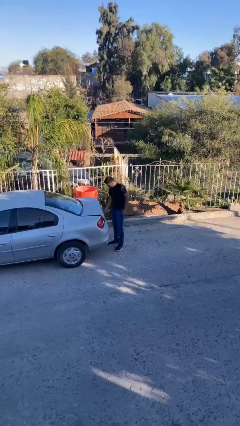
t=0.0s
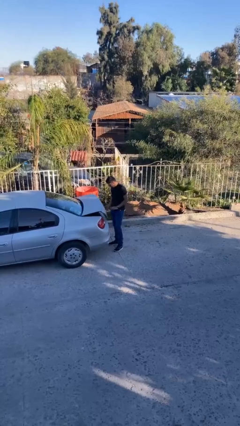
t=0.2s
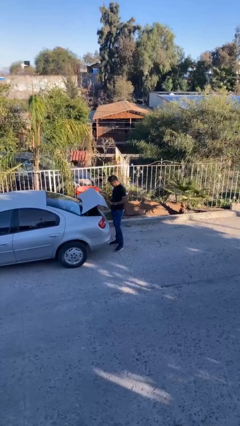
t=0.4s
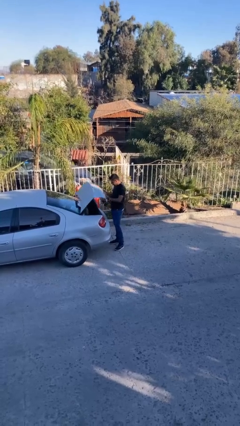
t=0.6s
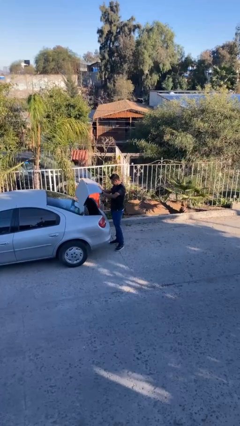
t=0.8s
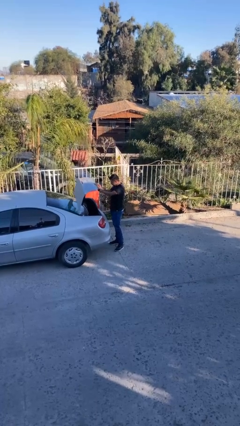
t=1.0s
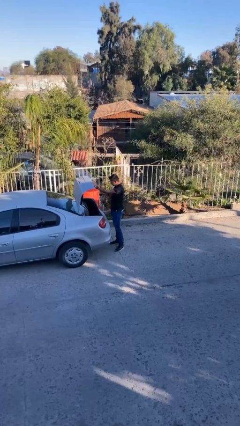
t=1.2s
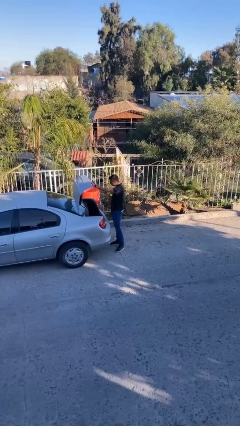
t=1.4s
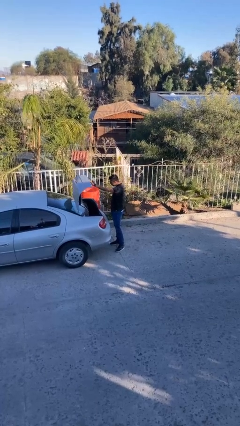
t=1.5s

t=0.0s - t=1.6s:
person opens car trunk

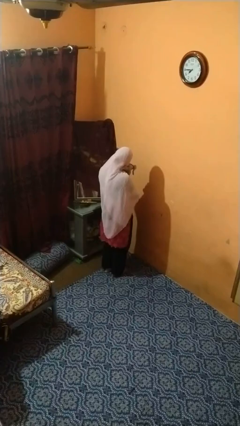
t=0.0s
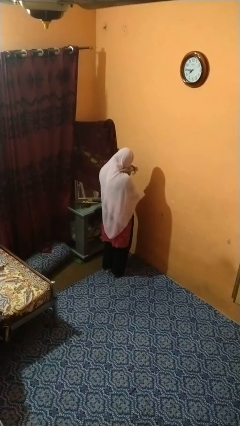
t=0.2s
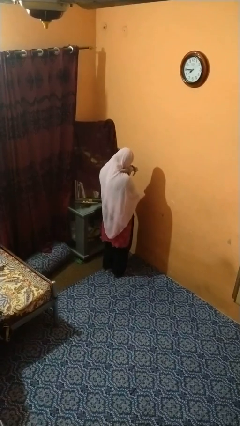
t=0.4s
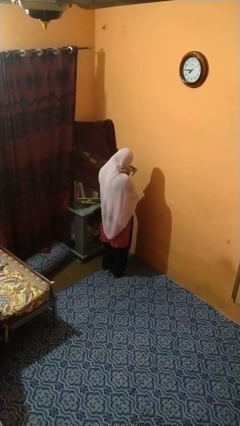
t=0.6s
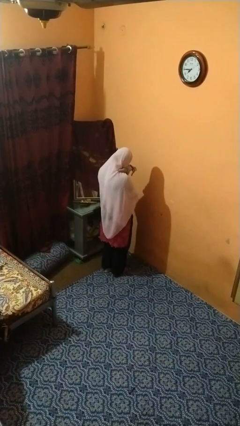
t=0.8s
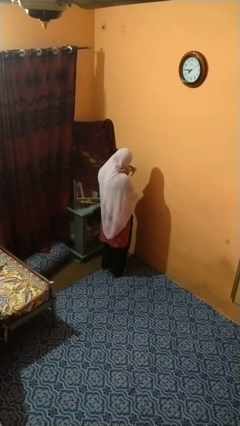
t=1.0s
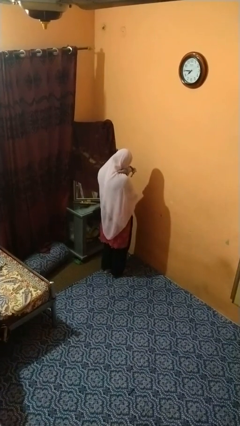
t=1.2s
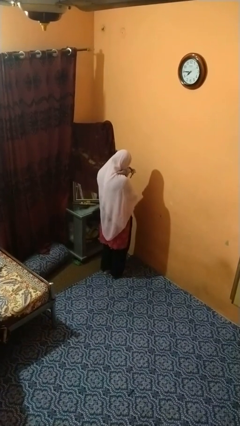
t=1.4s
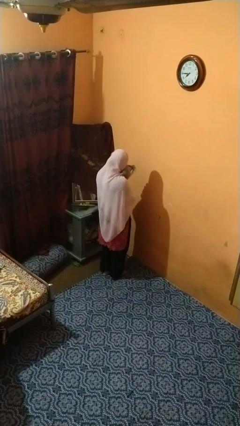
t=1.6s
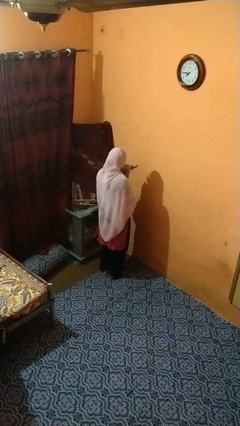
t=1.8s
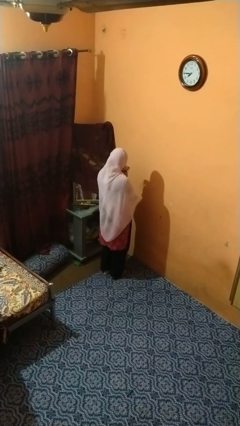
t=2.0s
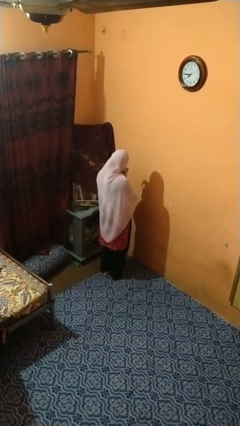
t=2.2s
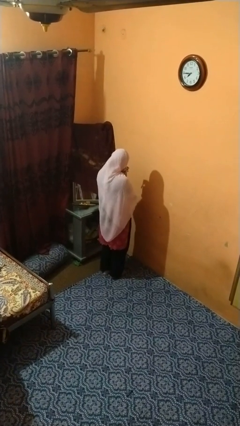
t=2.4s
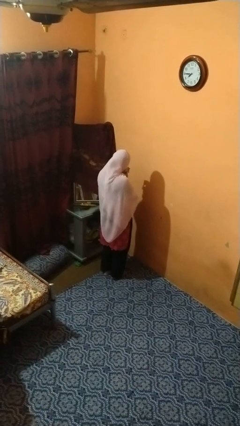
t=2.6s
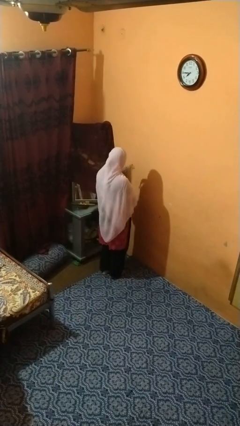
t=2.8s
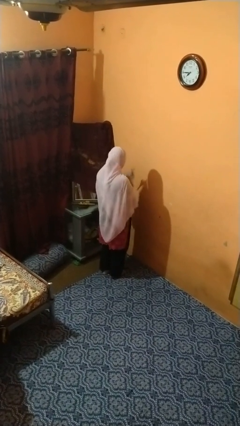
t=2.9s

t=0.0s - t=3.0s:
person hugs stuffed animal

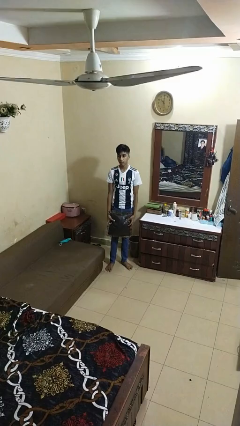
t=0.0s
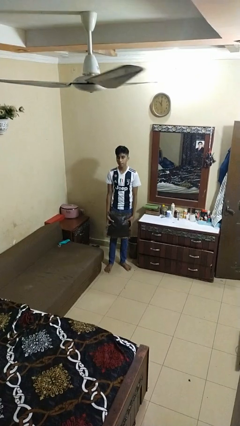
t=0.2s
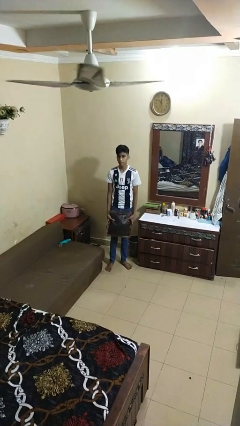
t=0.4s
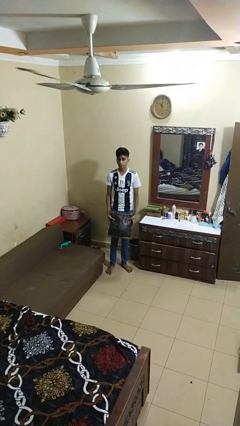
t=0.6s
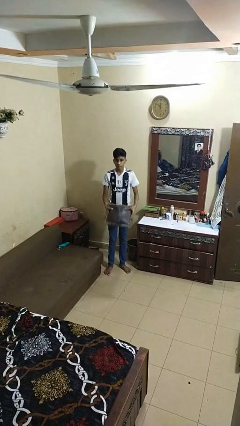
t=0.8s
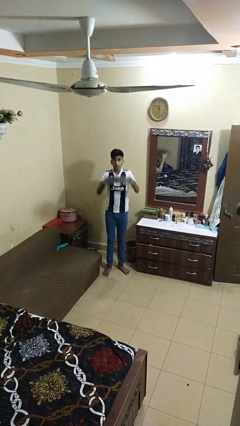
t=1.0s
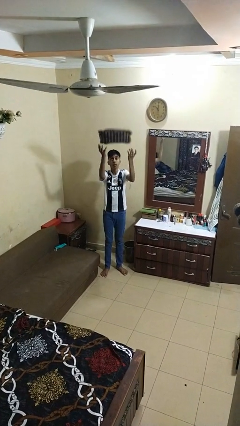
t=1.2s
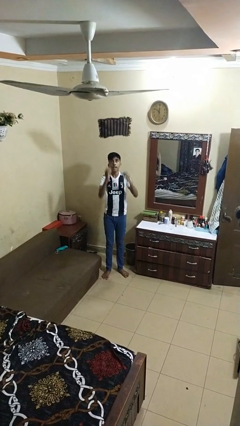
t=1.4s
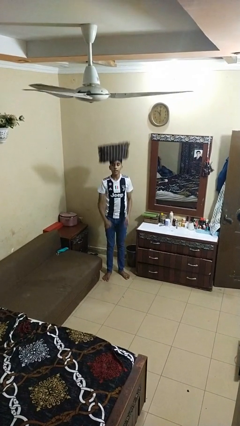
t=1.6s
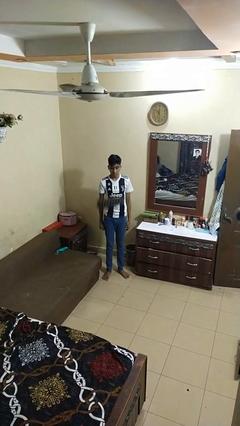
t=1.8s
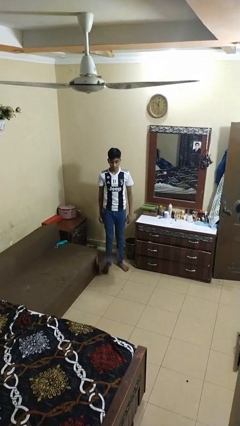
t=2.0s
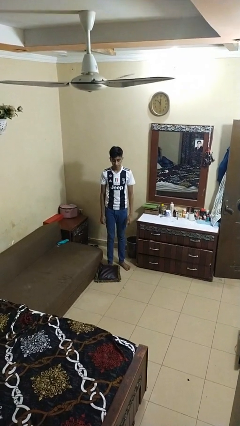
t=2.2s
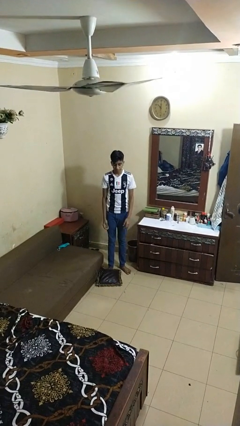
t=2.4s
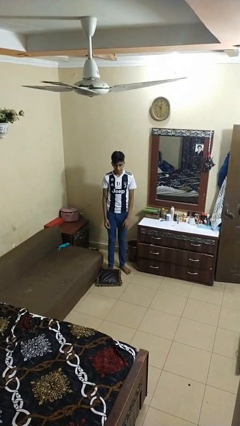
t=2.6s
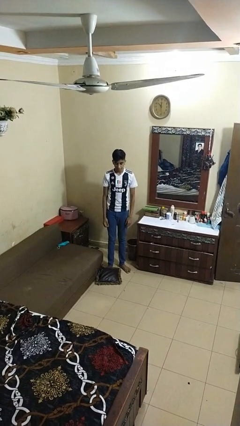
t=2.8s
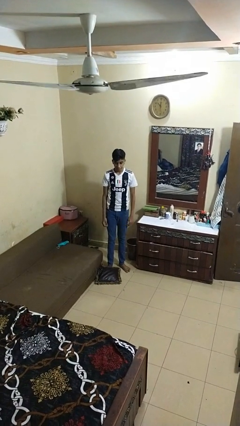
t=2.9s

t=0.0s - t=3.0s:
person throws object into air

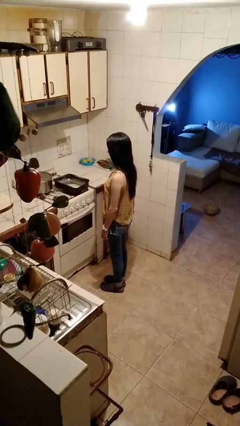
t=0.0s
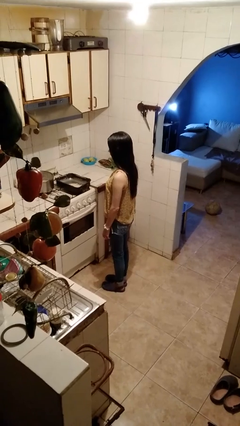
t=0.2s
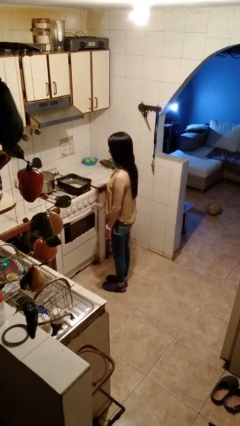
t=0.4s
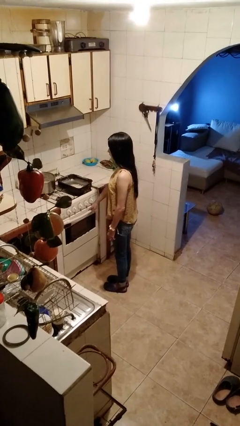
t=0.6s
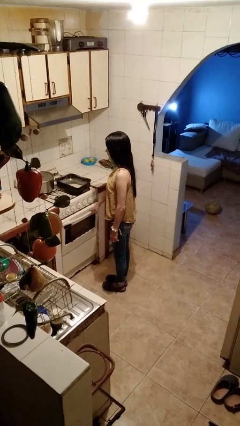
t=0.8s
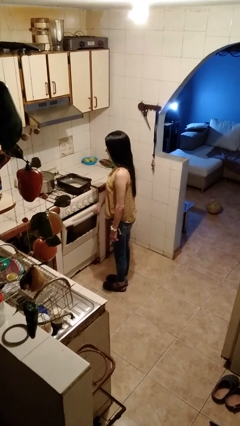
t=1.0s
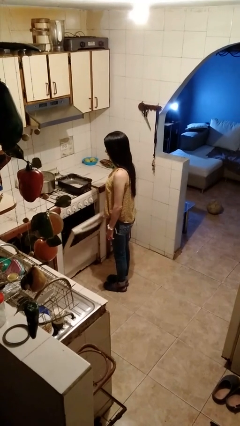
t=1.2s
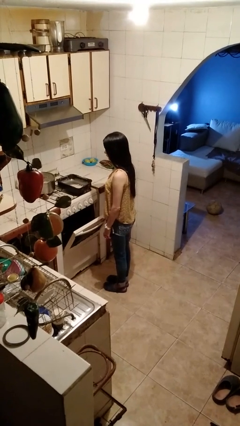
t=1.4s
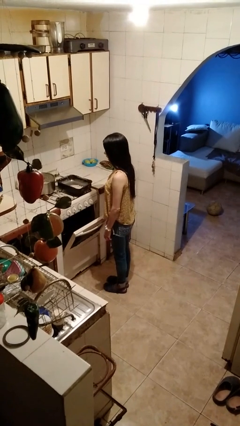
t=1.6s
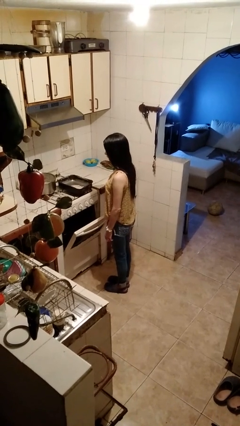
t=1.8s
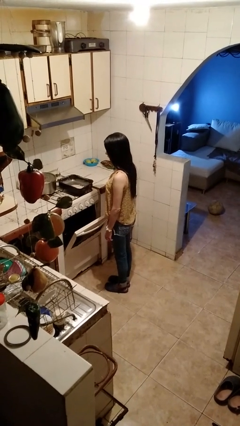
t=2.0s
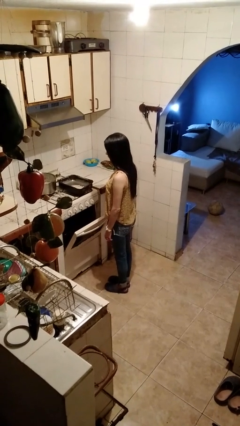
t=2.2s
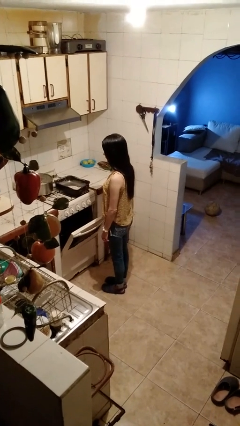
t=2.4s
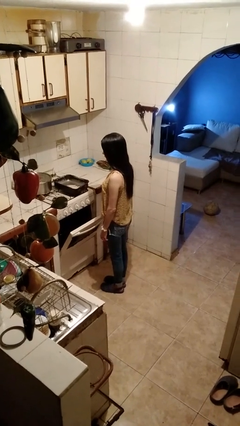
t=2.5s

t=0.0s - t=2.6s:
person opens oven door

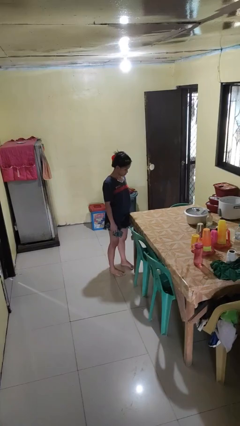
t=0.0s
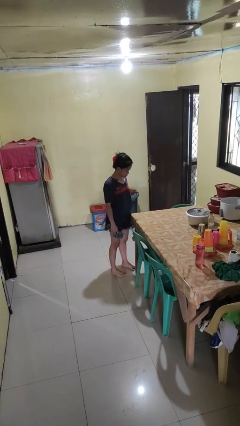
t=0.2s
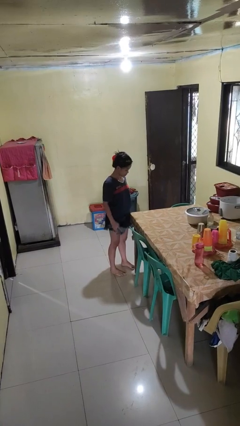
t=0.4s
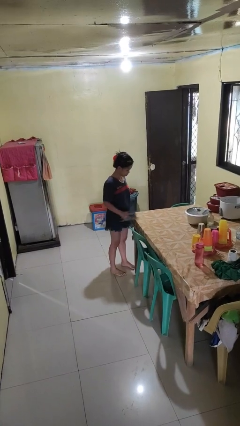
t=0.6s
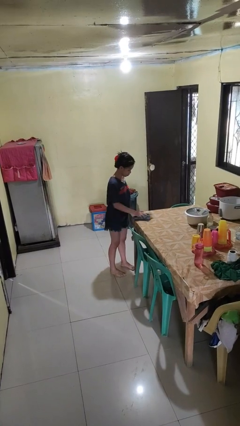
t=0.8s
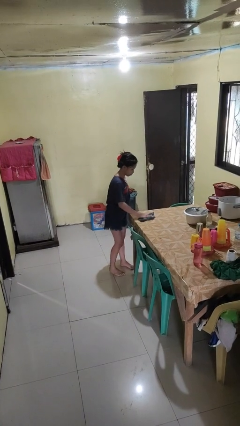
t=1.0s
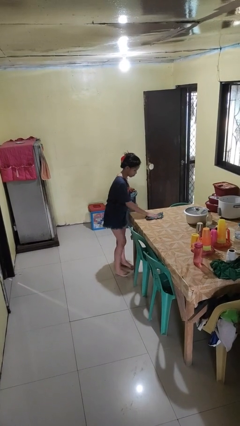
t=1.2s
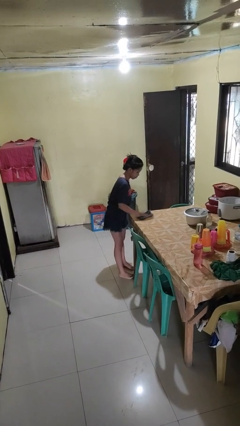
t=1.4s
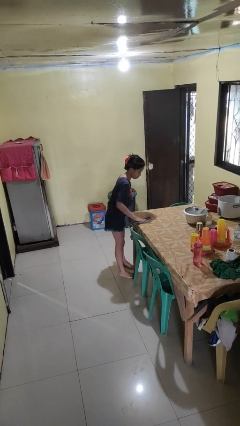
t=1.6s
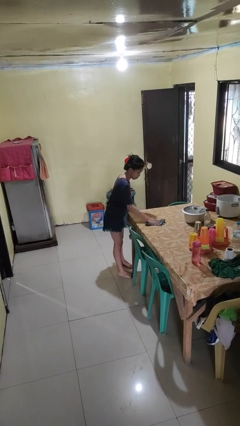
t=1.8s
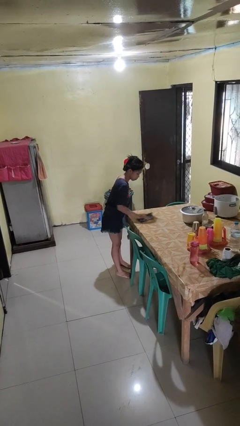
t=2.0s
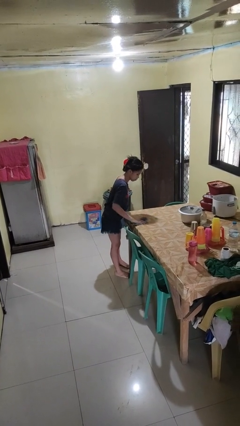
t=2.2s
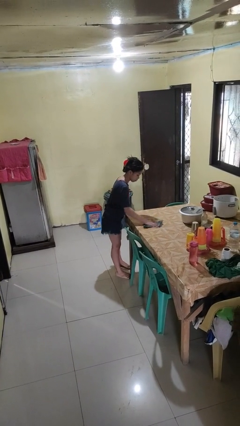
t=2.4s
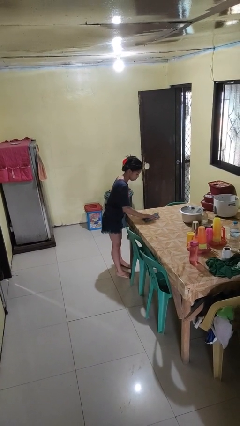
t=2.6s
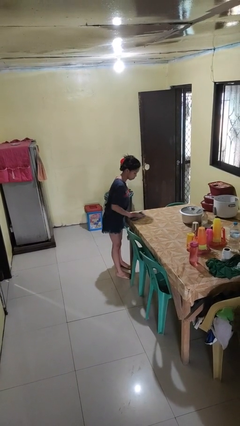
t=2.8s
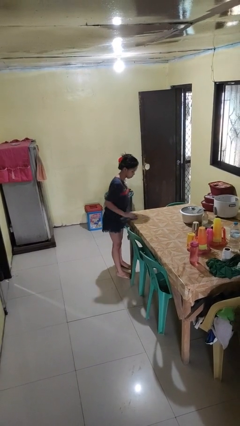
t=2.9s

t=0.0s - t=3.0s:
person cleans table with rag

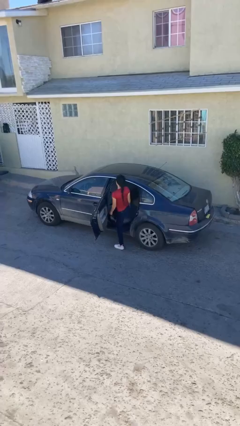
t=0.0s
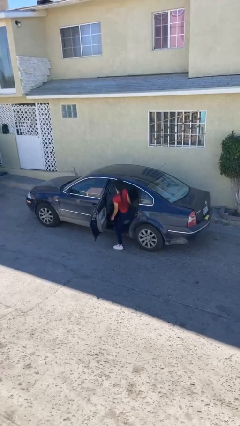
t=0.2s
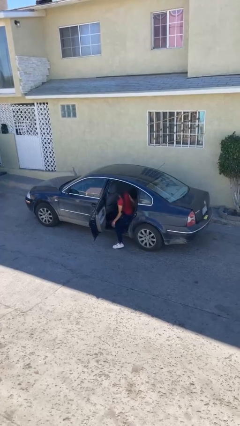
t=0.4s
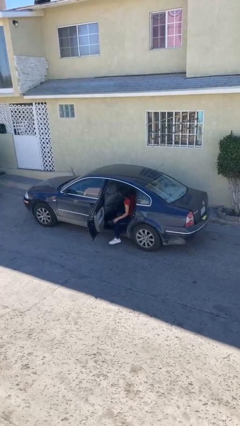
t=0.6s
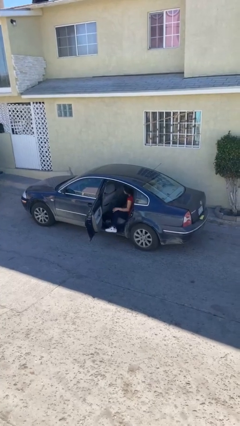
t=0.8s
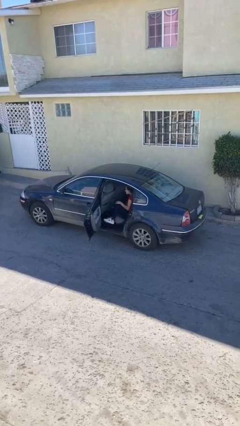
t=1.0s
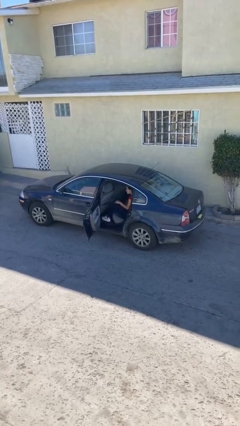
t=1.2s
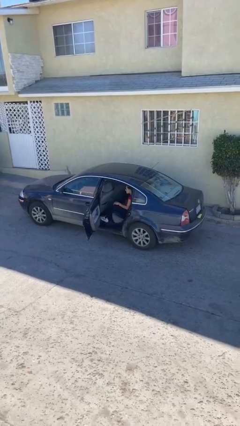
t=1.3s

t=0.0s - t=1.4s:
person enters car

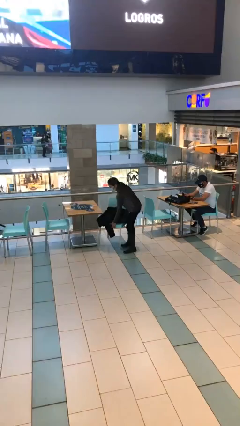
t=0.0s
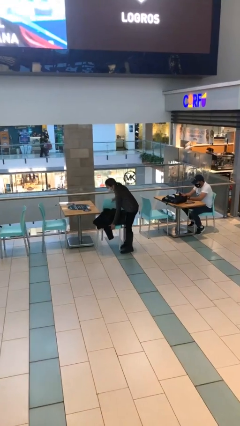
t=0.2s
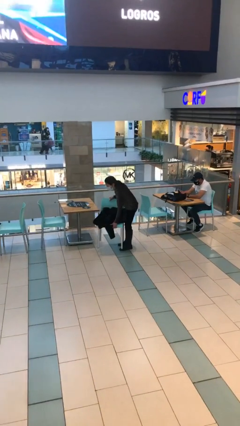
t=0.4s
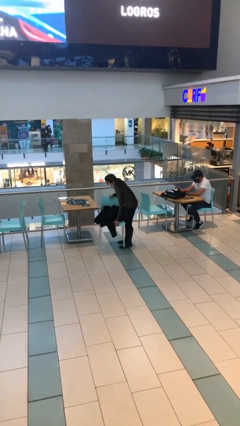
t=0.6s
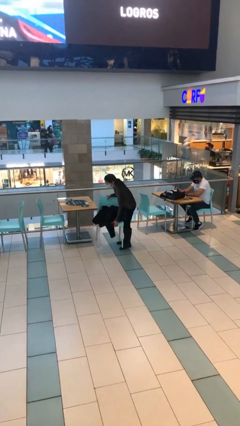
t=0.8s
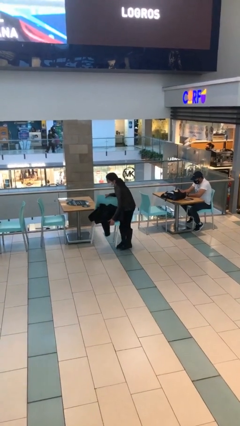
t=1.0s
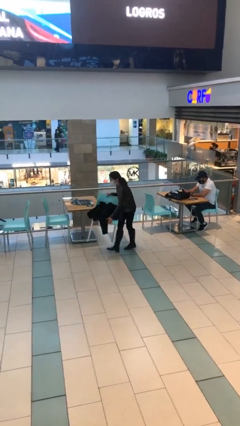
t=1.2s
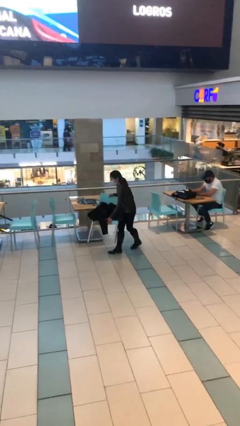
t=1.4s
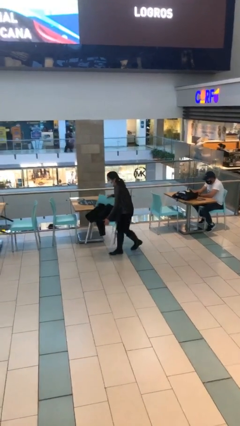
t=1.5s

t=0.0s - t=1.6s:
person picks up object from floor

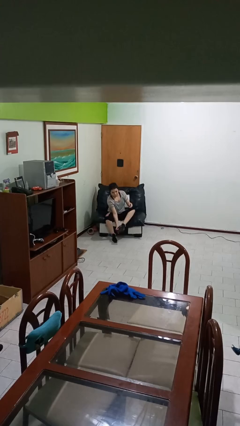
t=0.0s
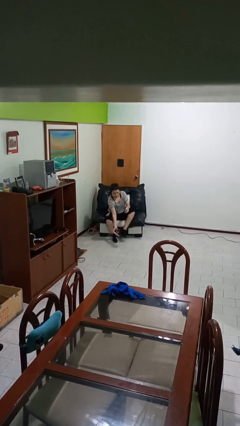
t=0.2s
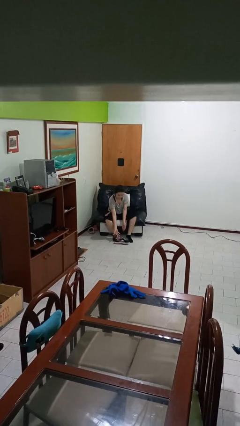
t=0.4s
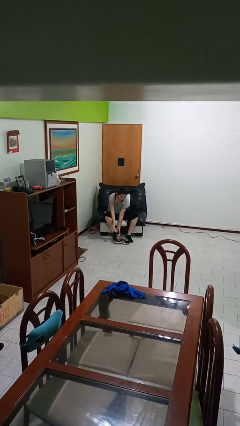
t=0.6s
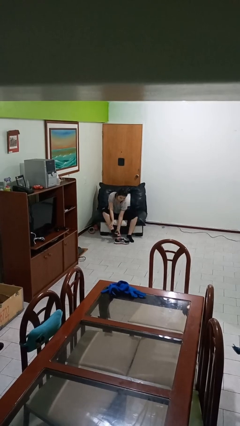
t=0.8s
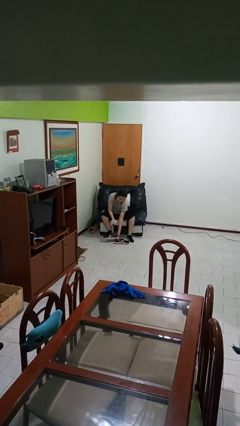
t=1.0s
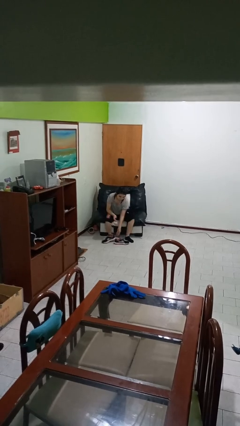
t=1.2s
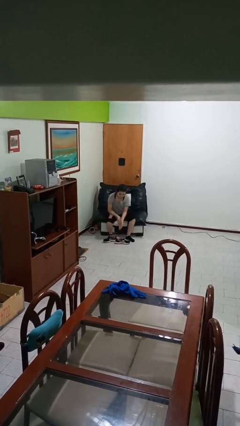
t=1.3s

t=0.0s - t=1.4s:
person takes off shoes
